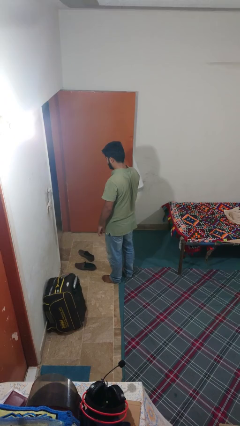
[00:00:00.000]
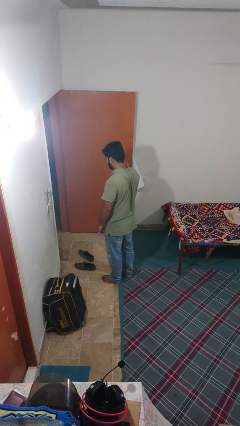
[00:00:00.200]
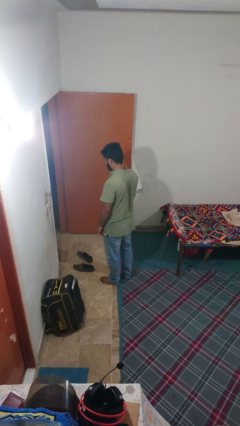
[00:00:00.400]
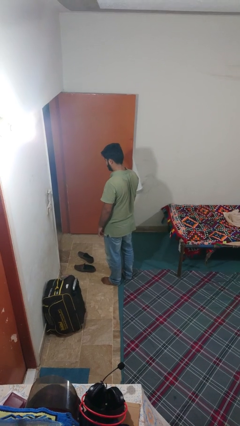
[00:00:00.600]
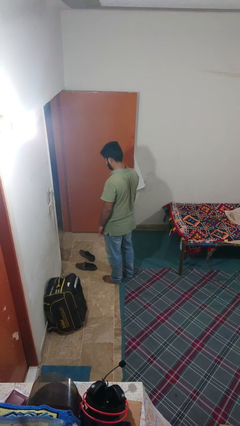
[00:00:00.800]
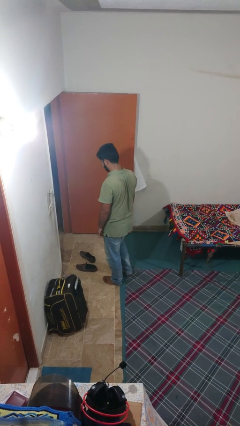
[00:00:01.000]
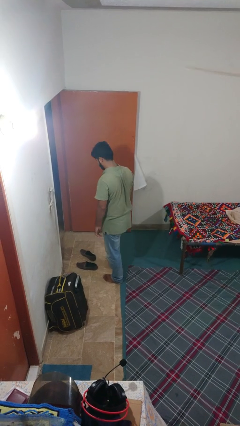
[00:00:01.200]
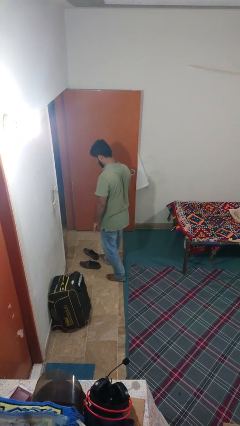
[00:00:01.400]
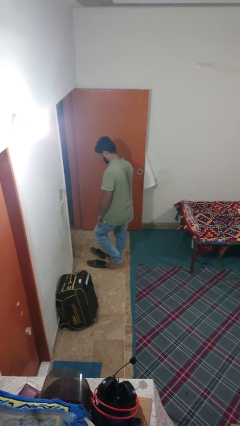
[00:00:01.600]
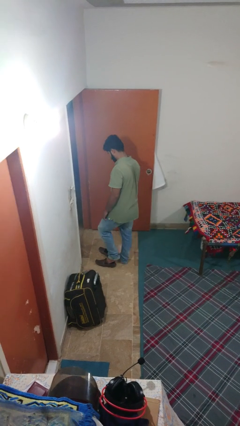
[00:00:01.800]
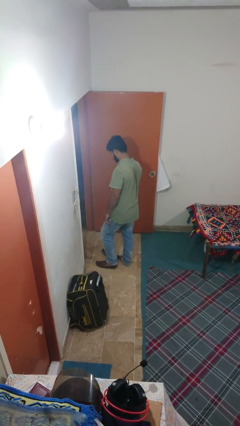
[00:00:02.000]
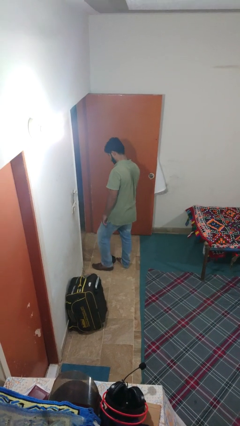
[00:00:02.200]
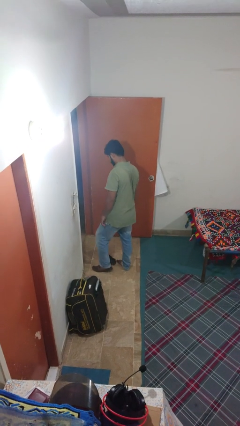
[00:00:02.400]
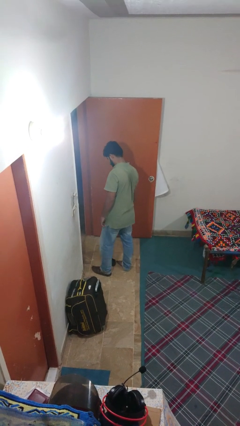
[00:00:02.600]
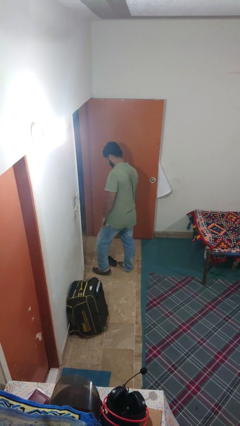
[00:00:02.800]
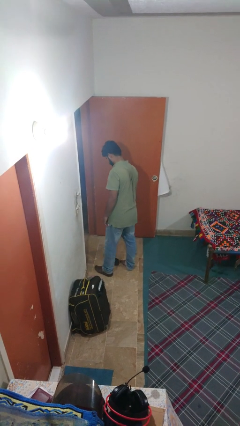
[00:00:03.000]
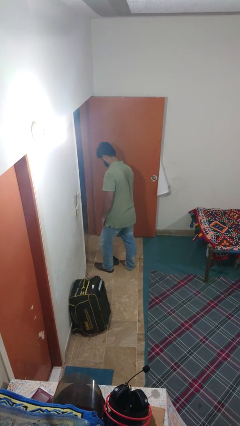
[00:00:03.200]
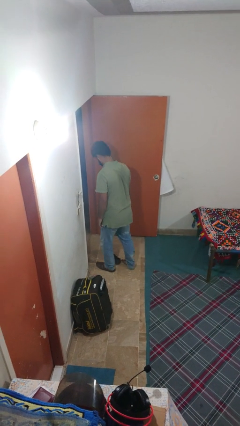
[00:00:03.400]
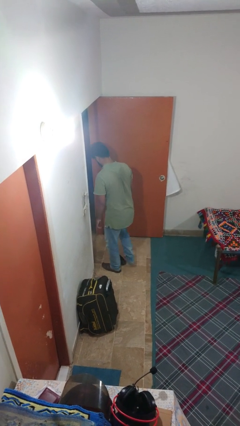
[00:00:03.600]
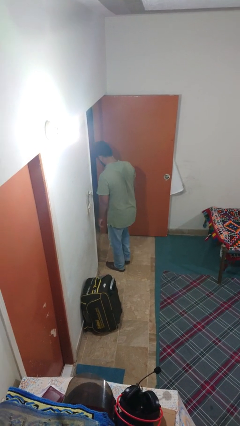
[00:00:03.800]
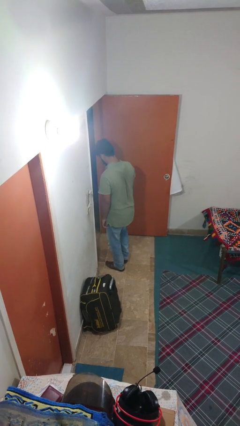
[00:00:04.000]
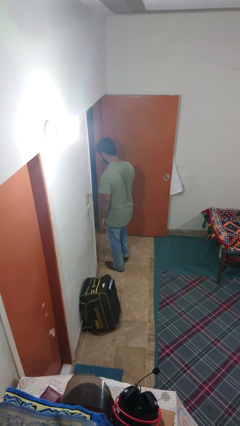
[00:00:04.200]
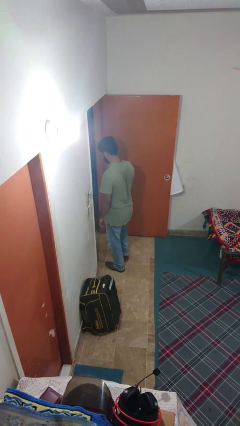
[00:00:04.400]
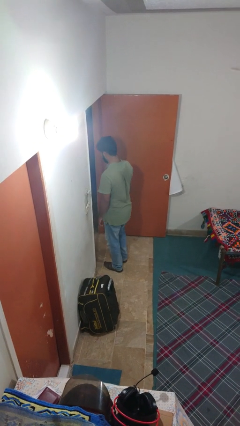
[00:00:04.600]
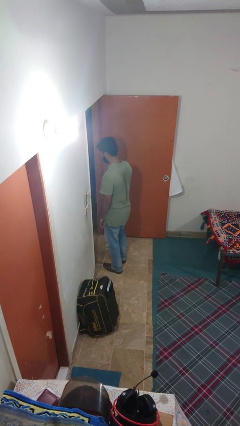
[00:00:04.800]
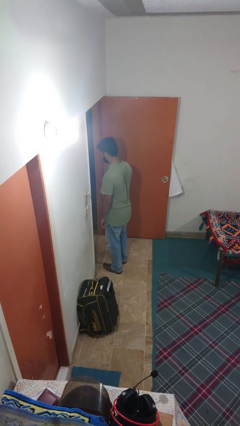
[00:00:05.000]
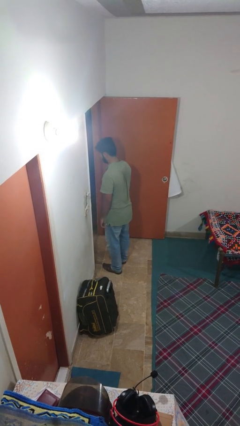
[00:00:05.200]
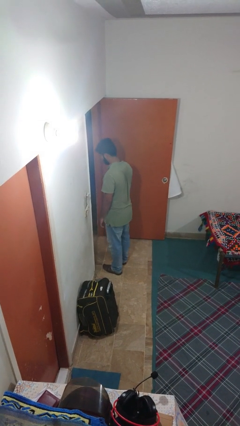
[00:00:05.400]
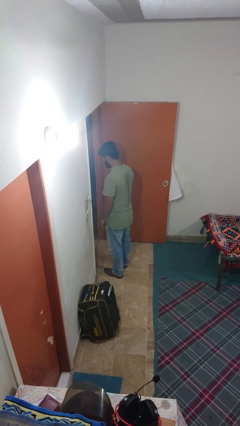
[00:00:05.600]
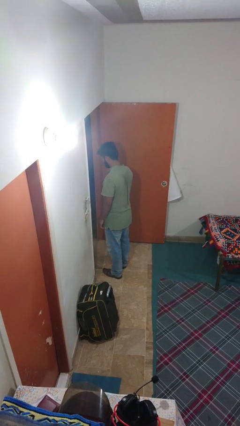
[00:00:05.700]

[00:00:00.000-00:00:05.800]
person puts on shoes

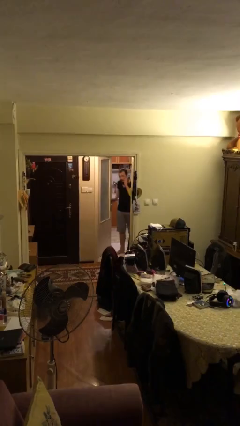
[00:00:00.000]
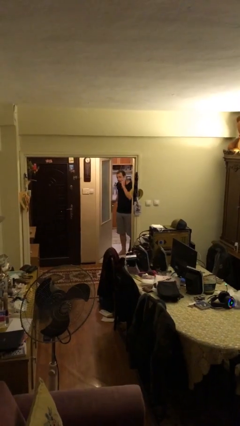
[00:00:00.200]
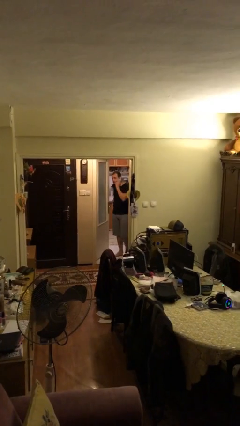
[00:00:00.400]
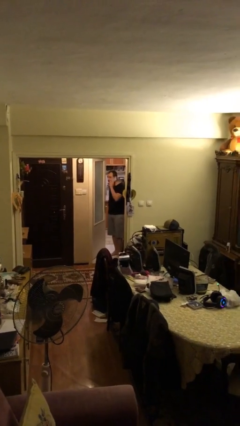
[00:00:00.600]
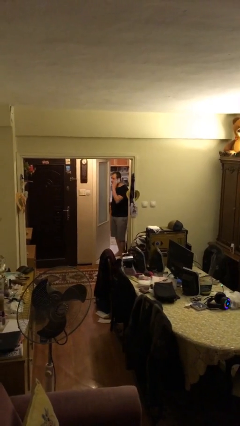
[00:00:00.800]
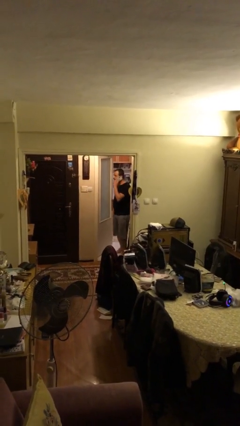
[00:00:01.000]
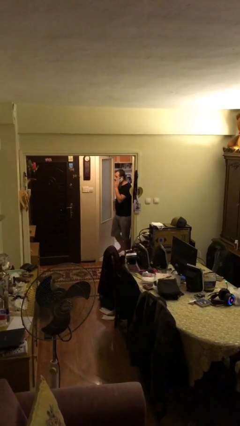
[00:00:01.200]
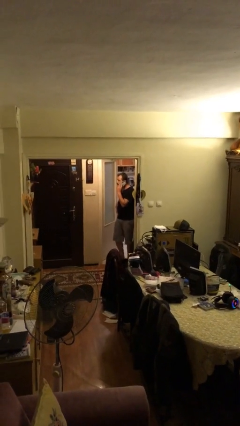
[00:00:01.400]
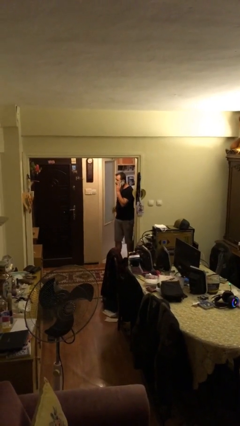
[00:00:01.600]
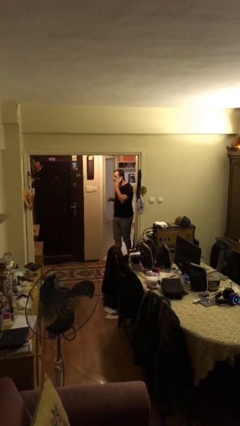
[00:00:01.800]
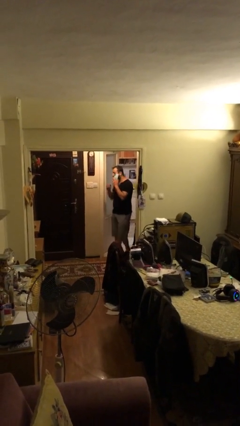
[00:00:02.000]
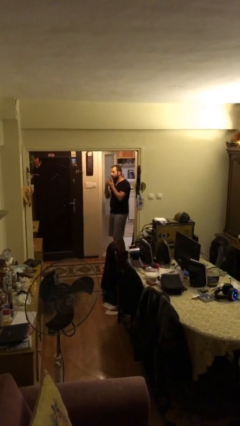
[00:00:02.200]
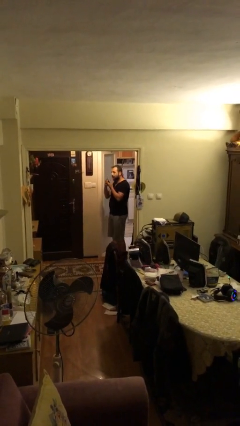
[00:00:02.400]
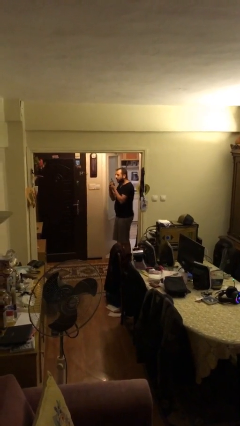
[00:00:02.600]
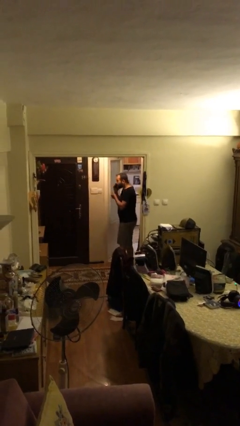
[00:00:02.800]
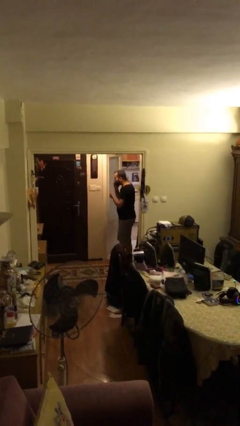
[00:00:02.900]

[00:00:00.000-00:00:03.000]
person enters scene through structure

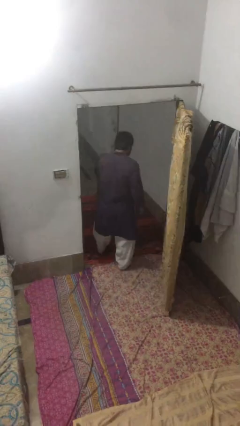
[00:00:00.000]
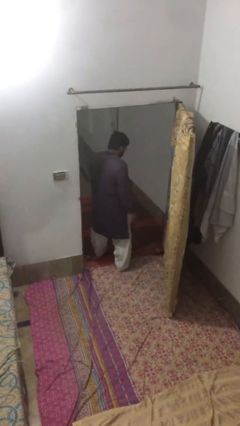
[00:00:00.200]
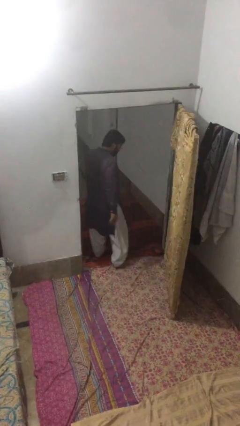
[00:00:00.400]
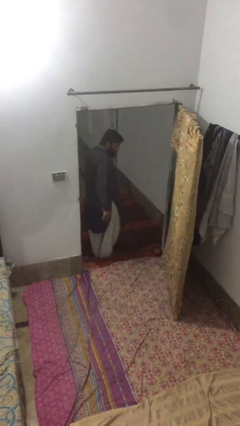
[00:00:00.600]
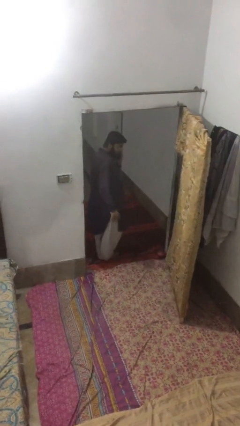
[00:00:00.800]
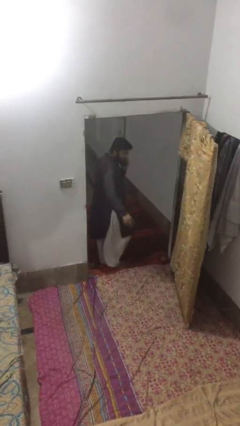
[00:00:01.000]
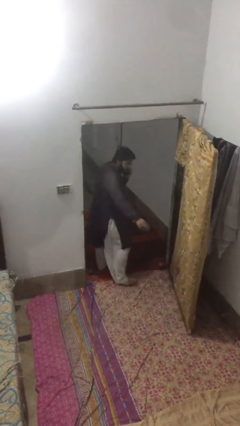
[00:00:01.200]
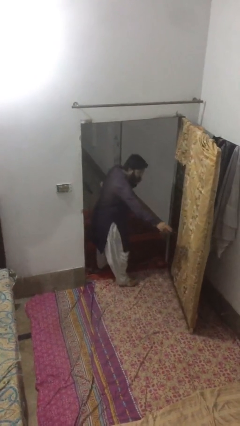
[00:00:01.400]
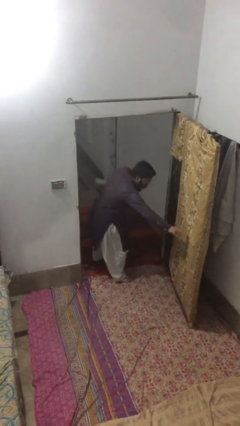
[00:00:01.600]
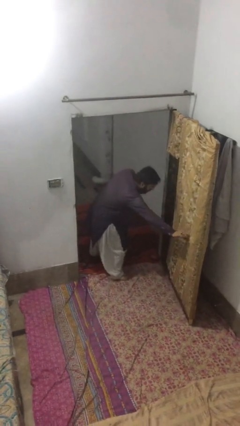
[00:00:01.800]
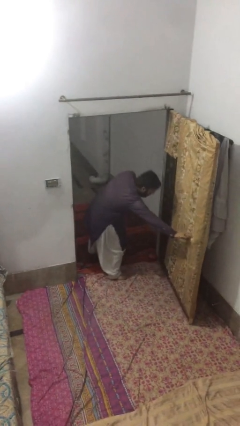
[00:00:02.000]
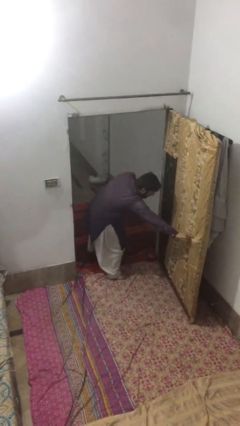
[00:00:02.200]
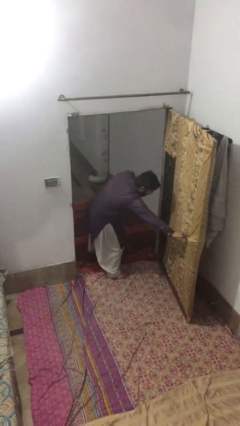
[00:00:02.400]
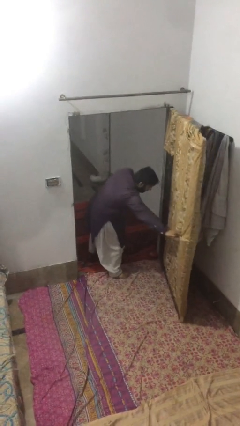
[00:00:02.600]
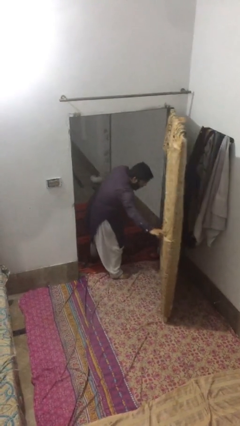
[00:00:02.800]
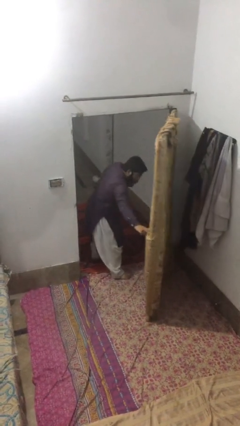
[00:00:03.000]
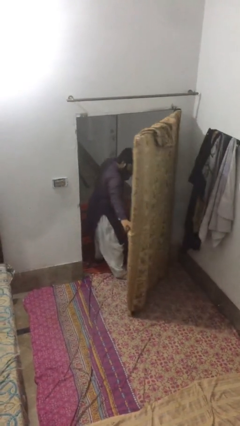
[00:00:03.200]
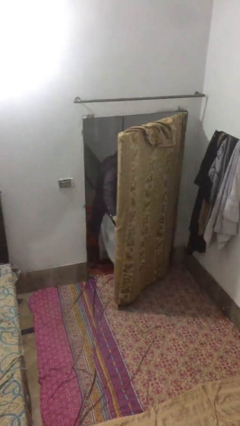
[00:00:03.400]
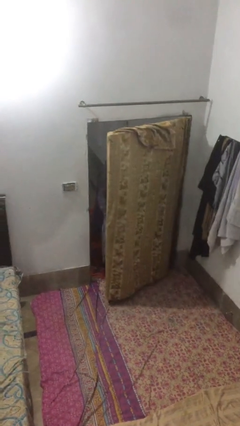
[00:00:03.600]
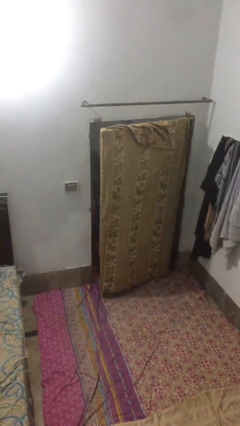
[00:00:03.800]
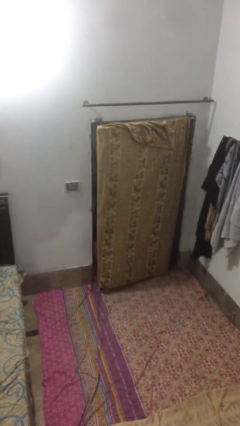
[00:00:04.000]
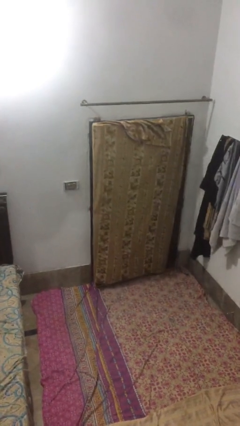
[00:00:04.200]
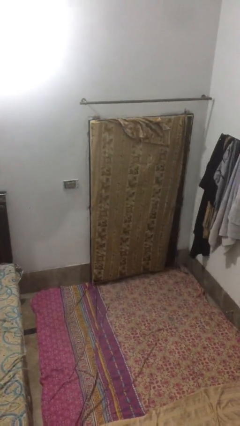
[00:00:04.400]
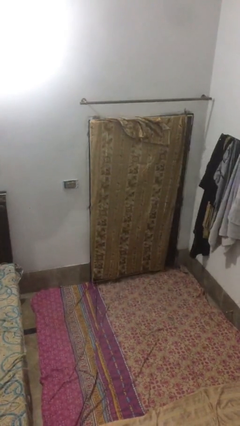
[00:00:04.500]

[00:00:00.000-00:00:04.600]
person closes facility door

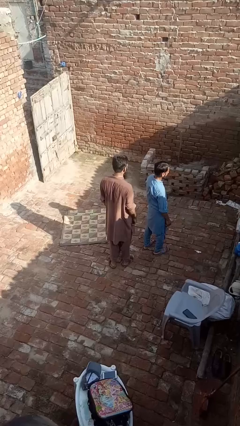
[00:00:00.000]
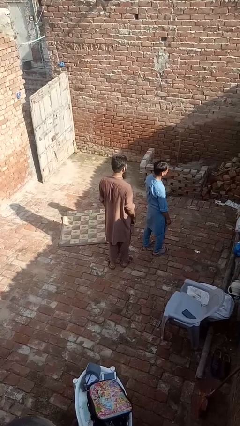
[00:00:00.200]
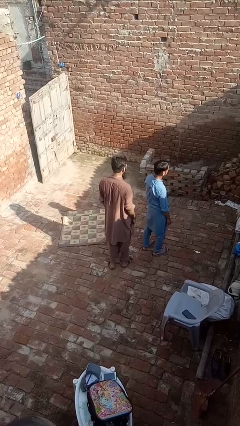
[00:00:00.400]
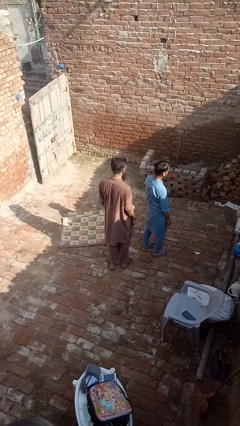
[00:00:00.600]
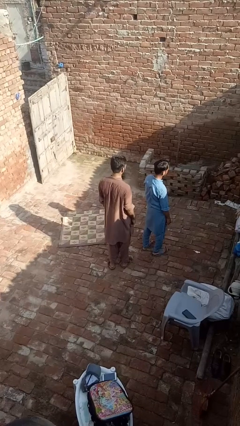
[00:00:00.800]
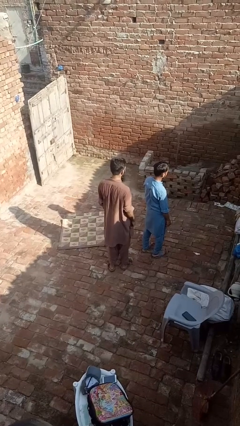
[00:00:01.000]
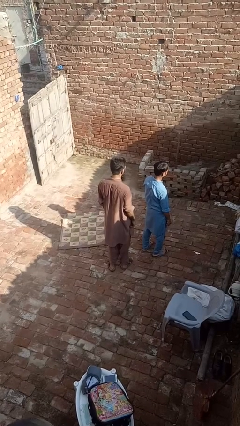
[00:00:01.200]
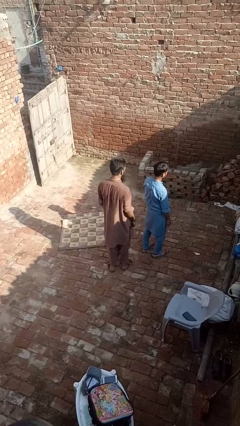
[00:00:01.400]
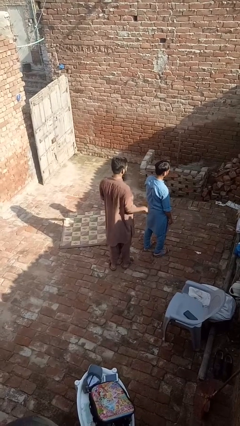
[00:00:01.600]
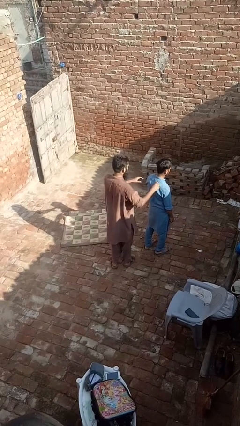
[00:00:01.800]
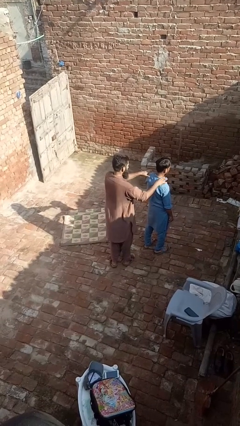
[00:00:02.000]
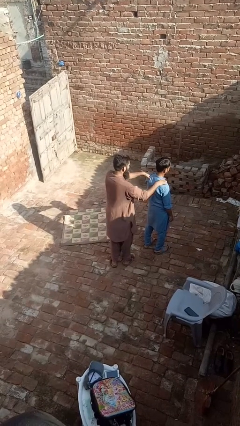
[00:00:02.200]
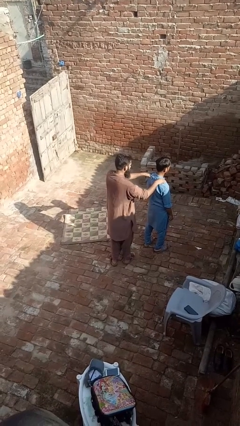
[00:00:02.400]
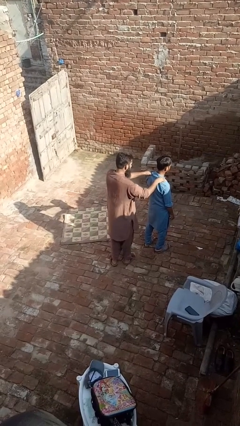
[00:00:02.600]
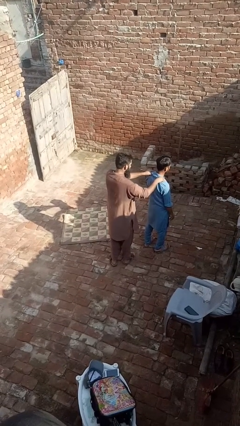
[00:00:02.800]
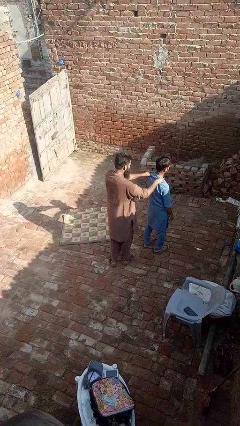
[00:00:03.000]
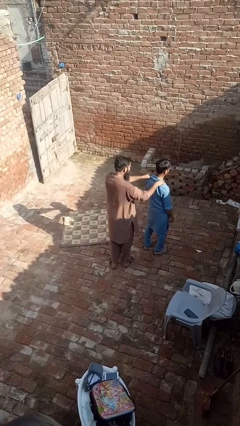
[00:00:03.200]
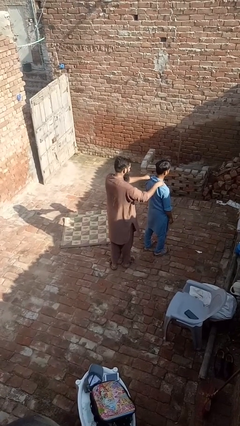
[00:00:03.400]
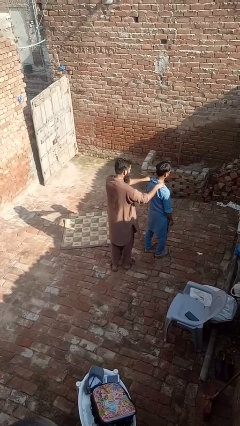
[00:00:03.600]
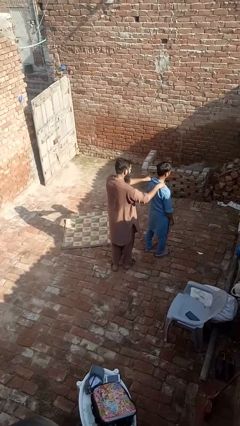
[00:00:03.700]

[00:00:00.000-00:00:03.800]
person grabs person by shoulder

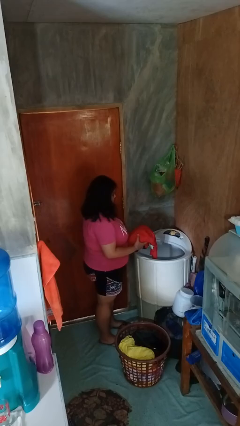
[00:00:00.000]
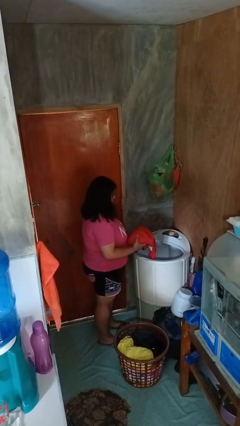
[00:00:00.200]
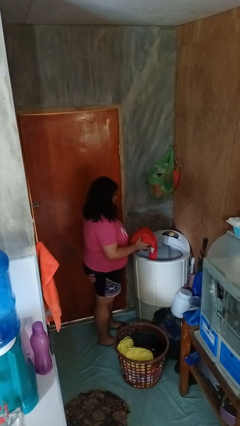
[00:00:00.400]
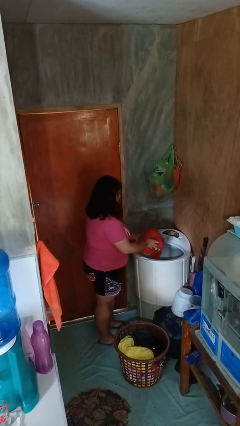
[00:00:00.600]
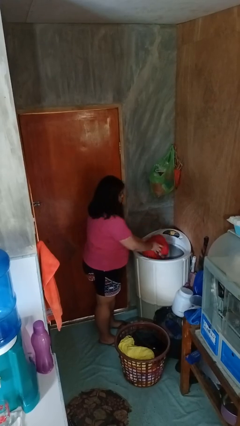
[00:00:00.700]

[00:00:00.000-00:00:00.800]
person loads dryer
